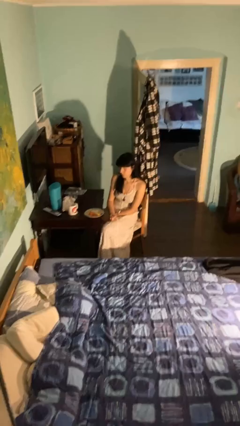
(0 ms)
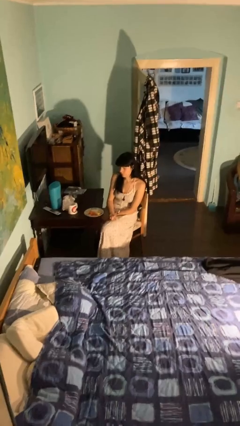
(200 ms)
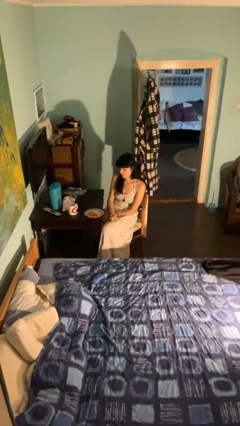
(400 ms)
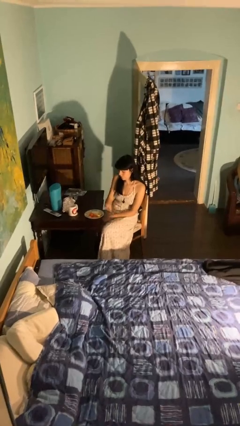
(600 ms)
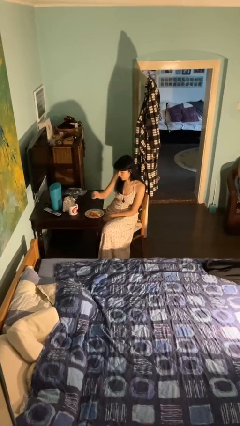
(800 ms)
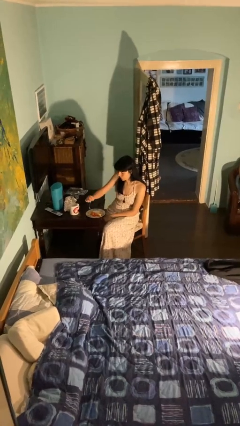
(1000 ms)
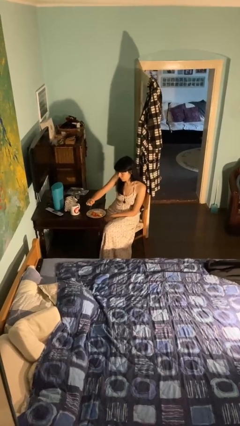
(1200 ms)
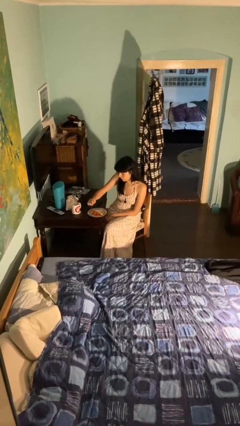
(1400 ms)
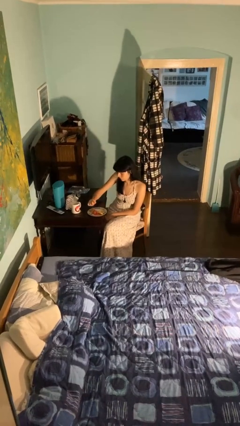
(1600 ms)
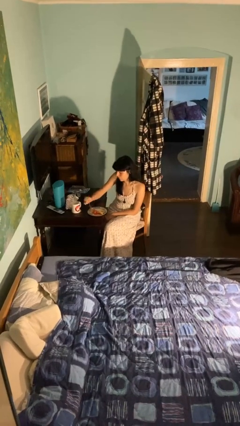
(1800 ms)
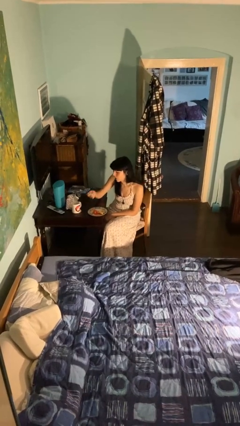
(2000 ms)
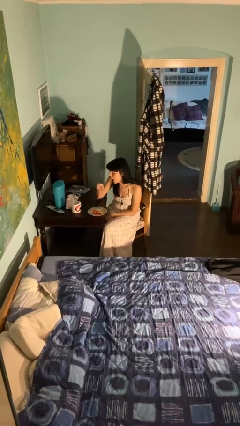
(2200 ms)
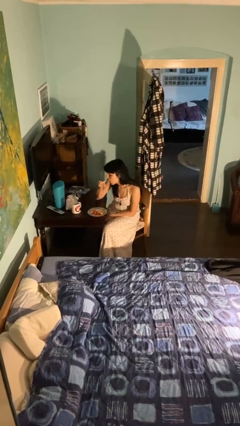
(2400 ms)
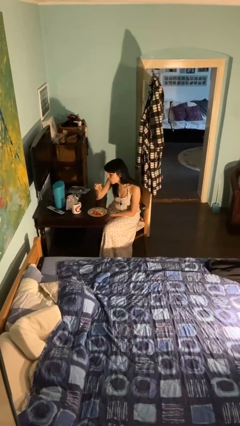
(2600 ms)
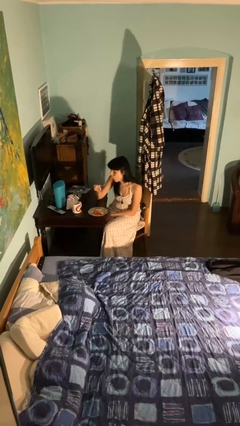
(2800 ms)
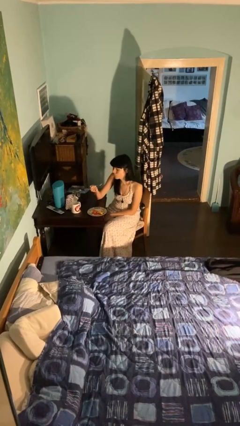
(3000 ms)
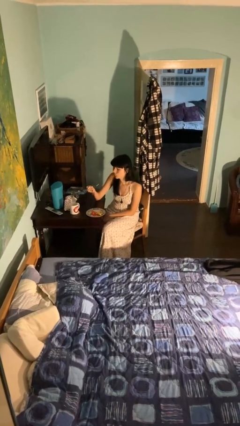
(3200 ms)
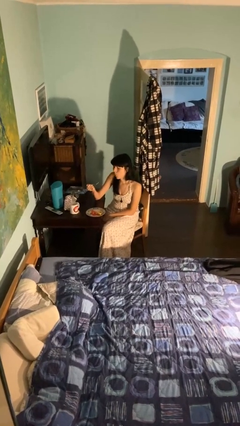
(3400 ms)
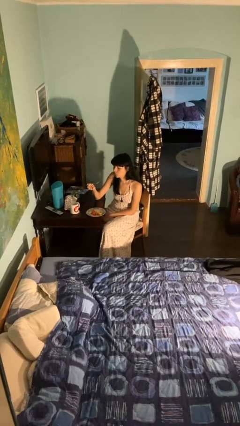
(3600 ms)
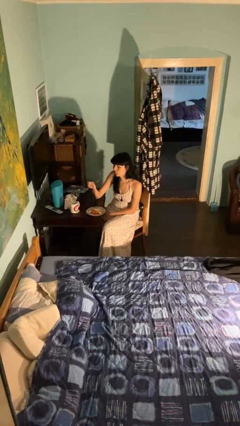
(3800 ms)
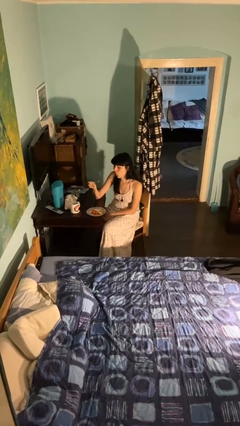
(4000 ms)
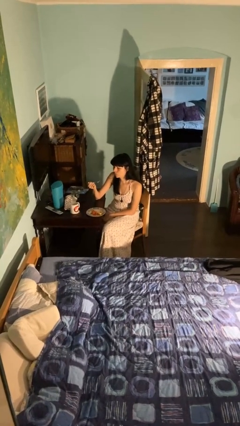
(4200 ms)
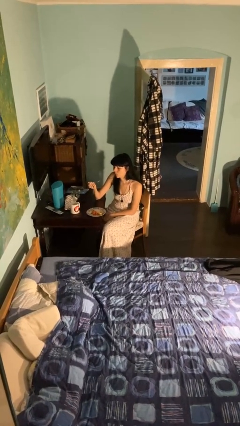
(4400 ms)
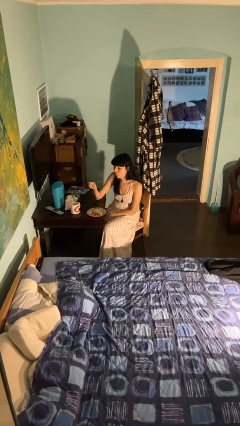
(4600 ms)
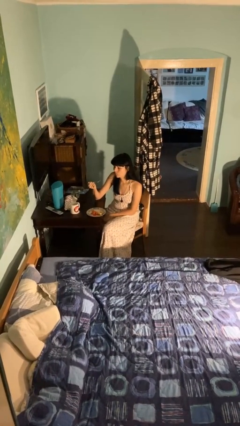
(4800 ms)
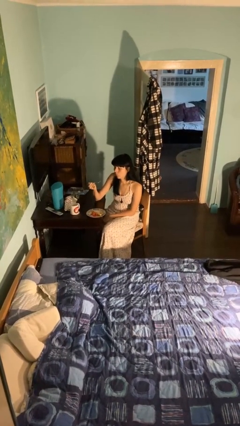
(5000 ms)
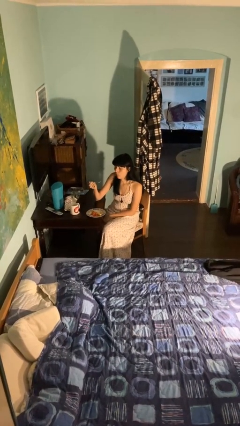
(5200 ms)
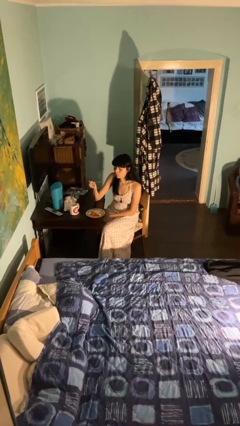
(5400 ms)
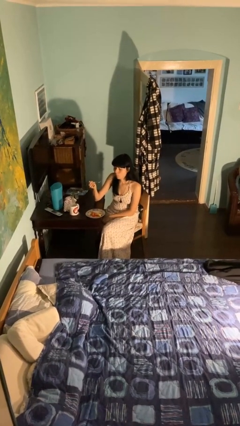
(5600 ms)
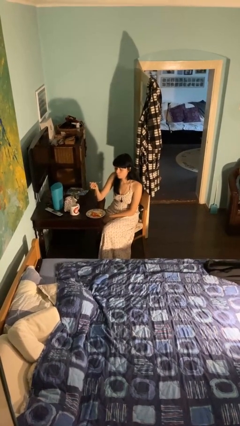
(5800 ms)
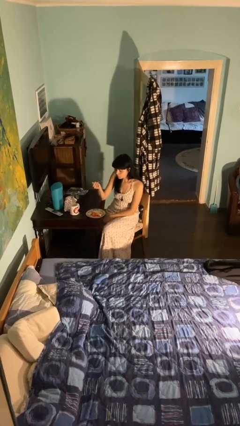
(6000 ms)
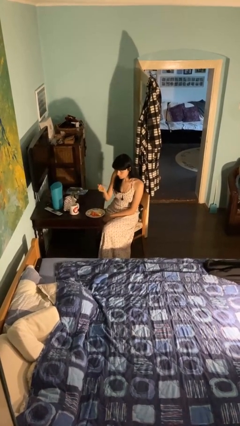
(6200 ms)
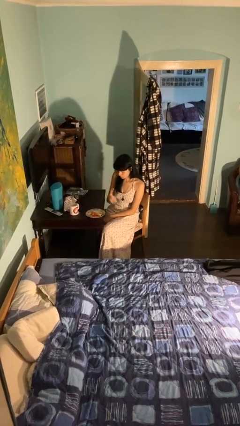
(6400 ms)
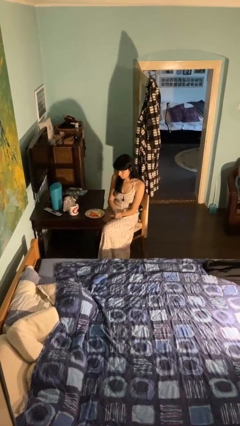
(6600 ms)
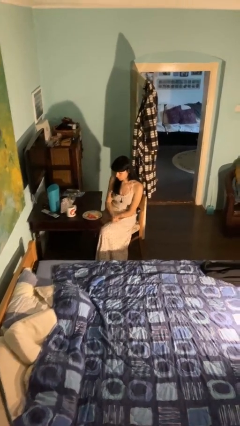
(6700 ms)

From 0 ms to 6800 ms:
person eats with utensil

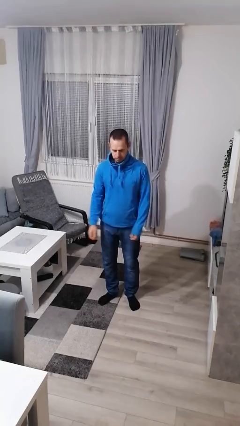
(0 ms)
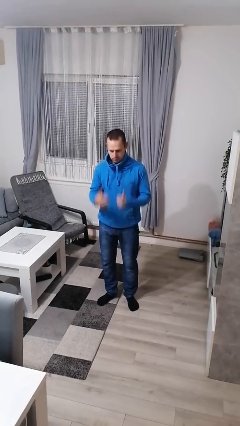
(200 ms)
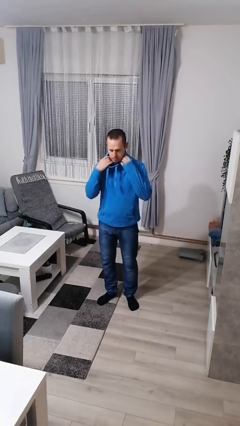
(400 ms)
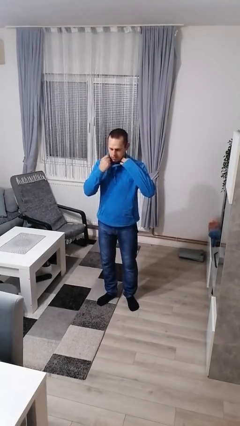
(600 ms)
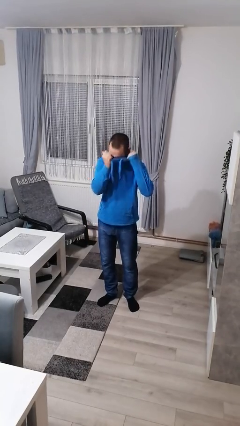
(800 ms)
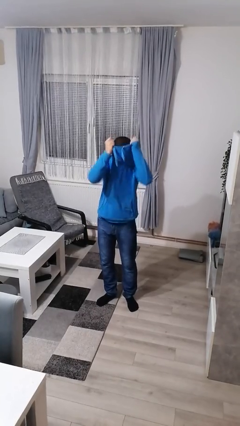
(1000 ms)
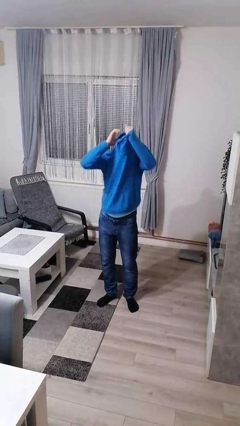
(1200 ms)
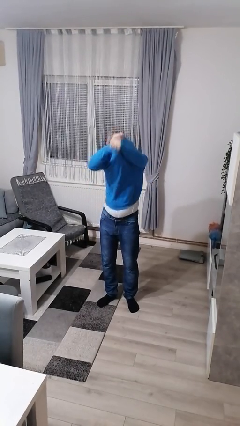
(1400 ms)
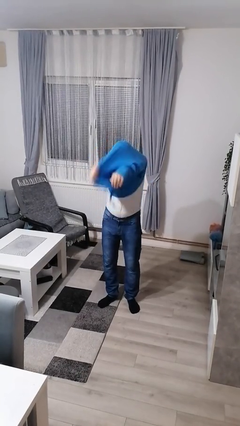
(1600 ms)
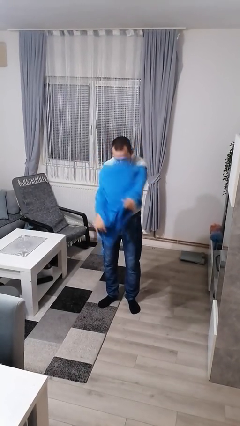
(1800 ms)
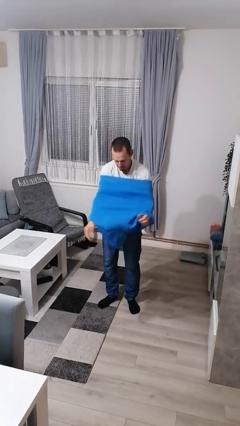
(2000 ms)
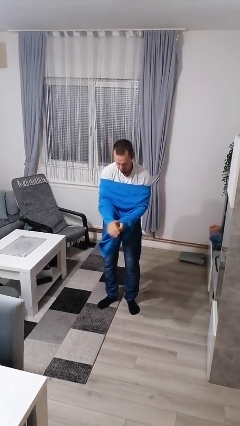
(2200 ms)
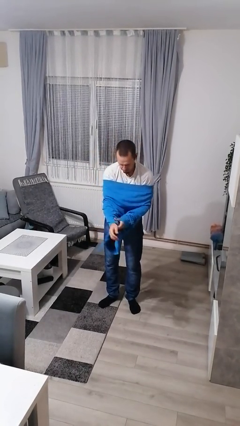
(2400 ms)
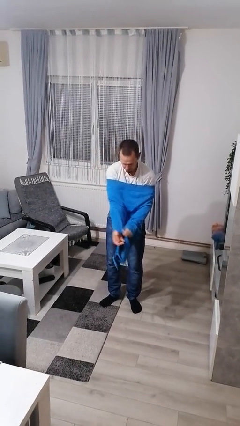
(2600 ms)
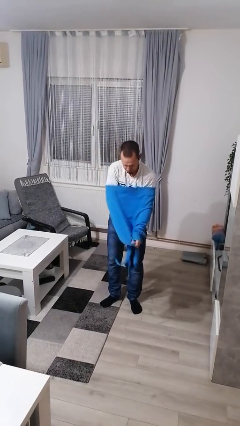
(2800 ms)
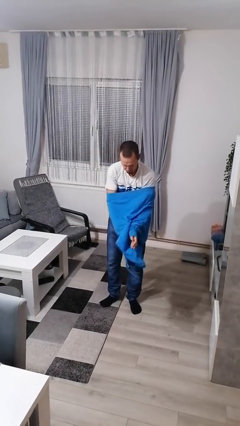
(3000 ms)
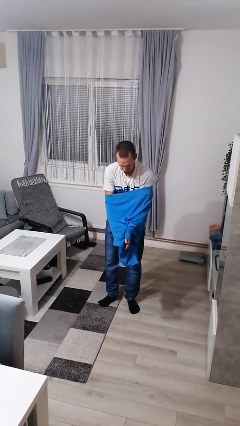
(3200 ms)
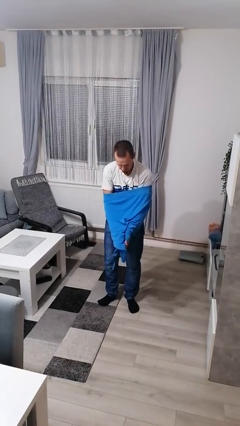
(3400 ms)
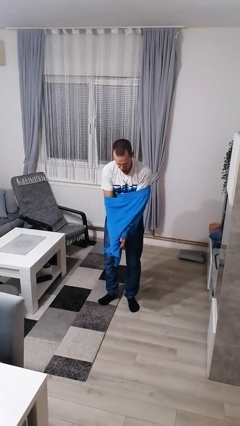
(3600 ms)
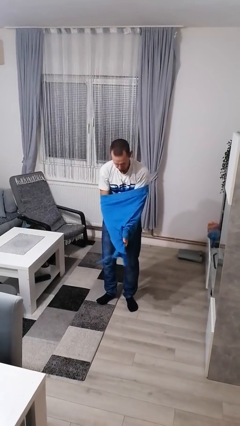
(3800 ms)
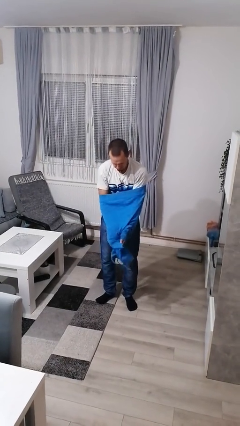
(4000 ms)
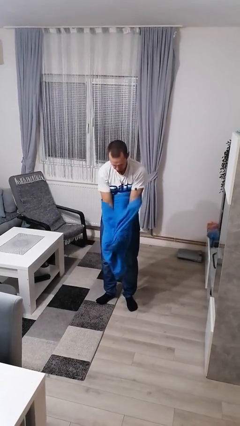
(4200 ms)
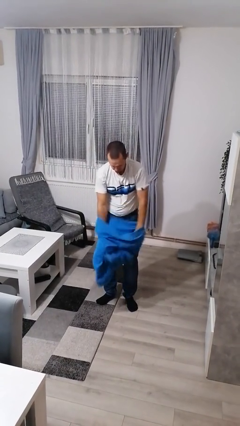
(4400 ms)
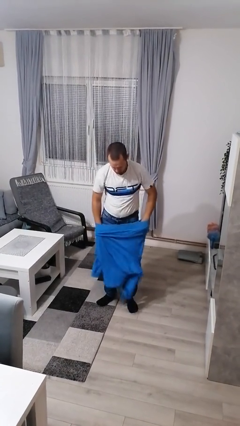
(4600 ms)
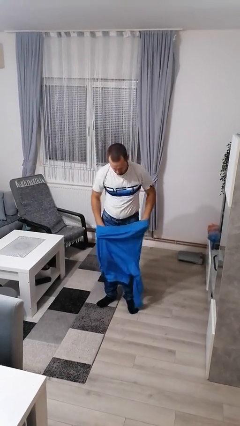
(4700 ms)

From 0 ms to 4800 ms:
person takes off hoodie

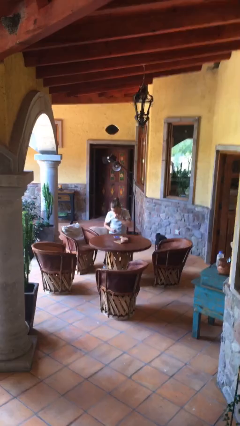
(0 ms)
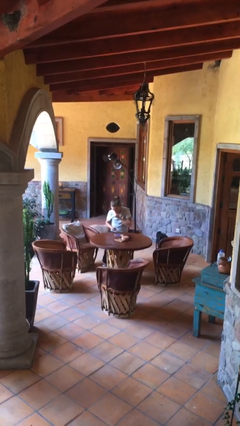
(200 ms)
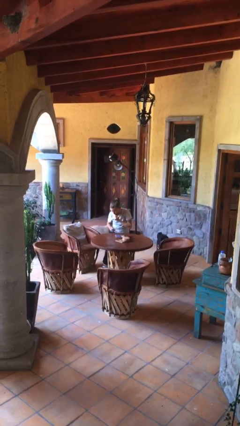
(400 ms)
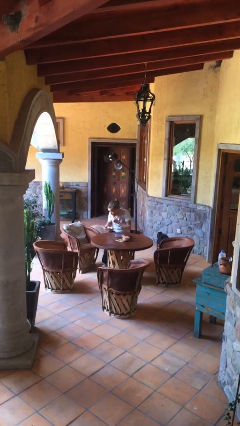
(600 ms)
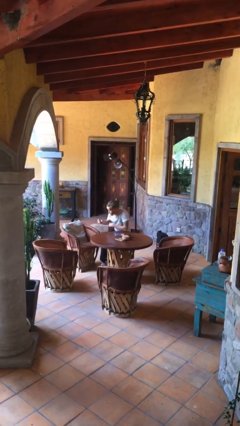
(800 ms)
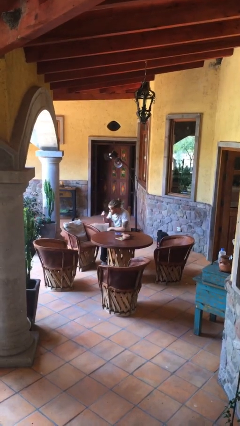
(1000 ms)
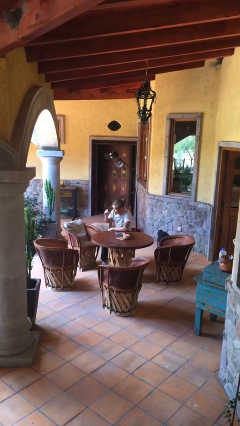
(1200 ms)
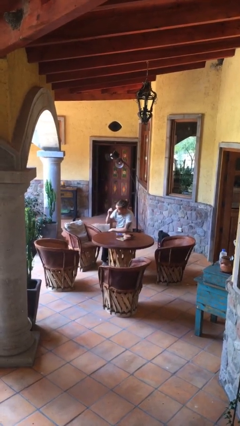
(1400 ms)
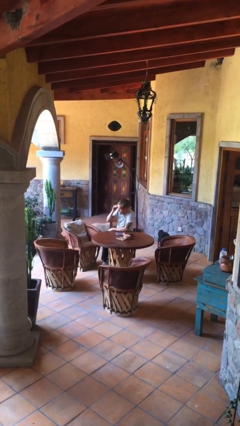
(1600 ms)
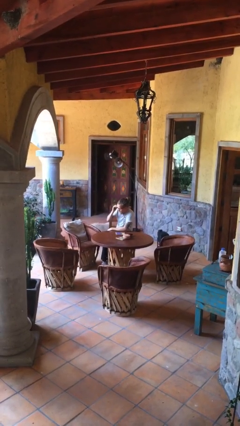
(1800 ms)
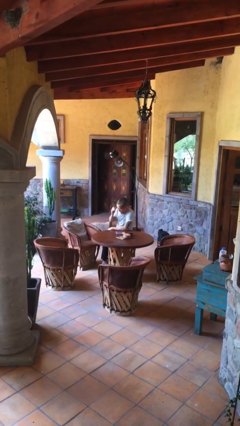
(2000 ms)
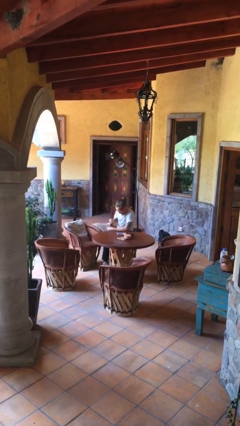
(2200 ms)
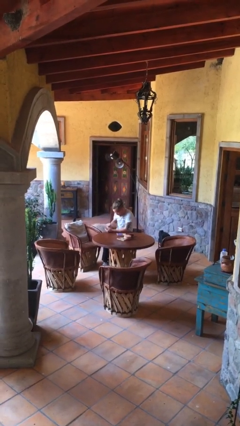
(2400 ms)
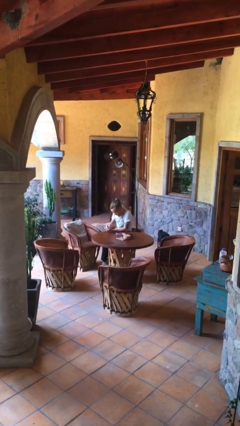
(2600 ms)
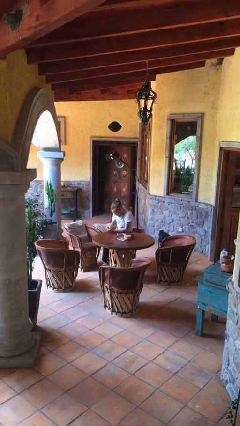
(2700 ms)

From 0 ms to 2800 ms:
person puts on glasses

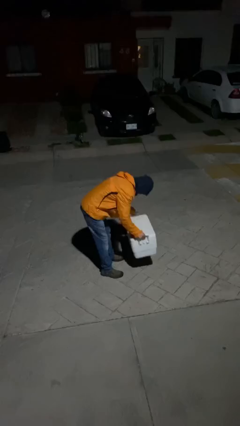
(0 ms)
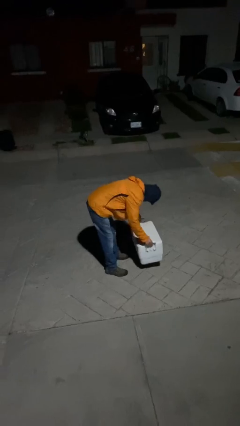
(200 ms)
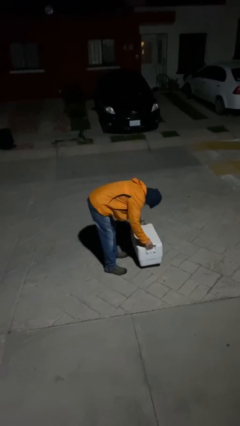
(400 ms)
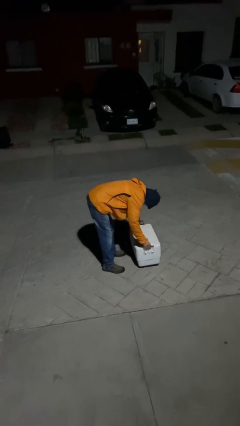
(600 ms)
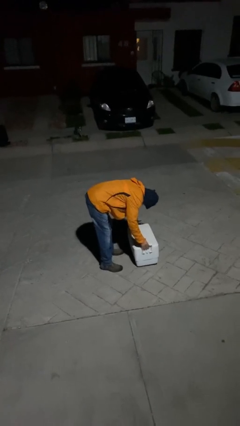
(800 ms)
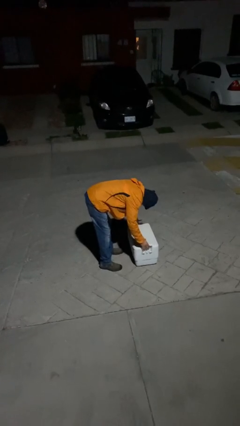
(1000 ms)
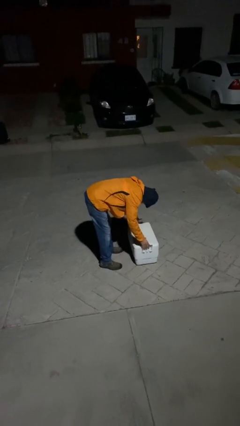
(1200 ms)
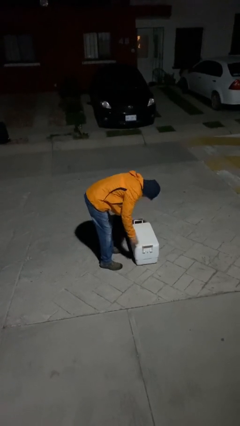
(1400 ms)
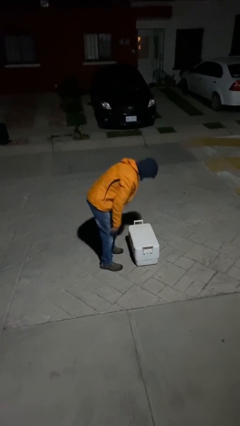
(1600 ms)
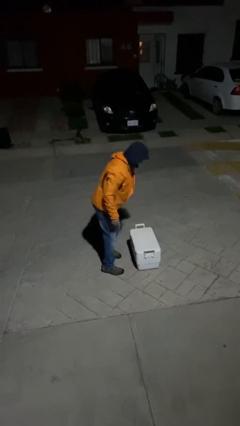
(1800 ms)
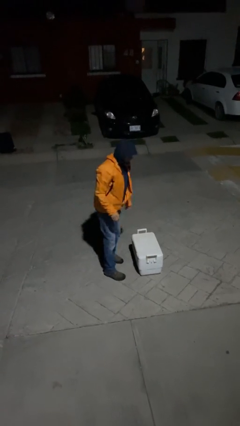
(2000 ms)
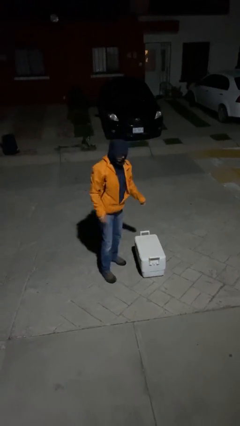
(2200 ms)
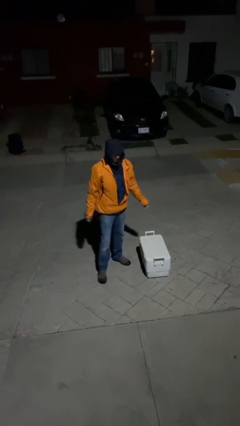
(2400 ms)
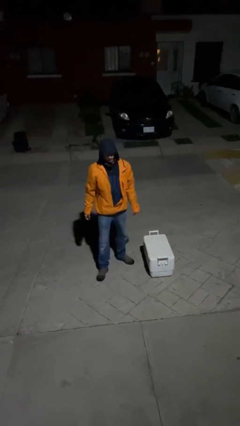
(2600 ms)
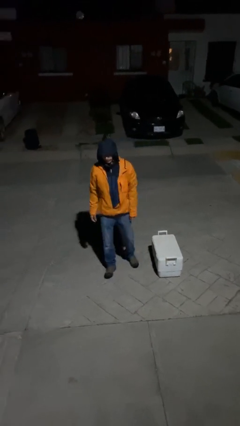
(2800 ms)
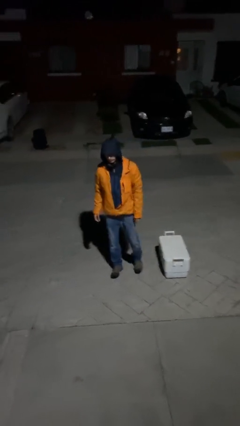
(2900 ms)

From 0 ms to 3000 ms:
person puts down object on floor

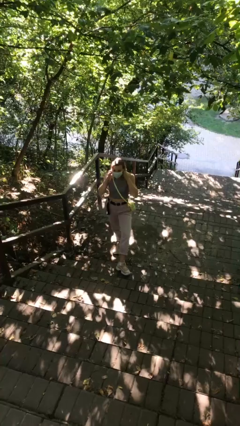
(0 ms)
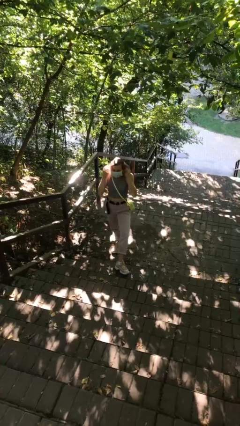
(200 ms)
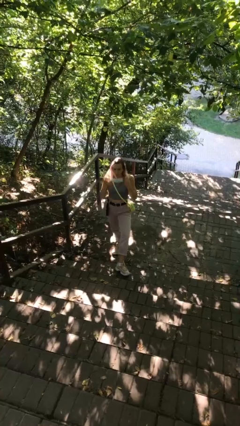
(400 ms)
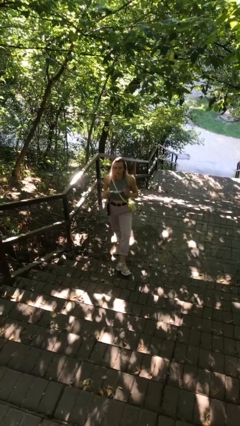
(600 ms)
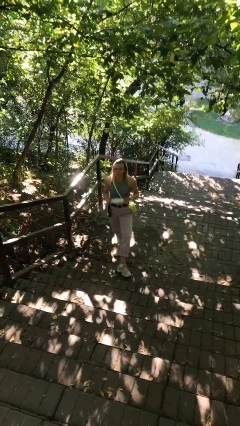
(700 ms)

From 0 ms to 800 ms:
person takes off facemask
